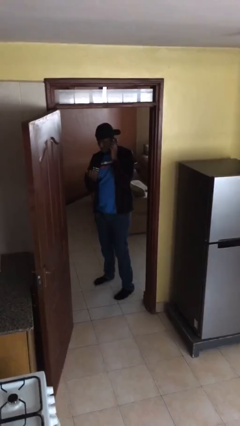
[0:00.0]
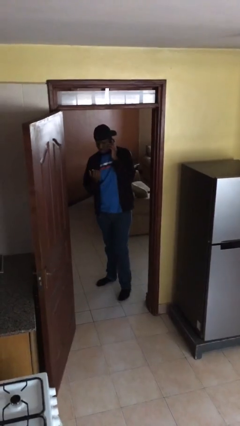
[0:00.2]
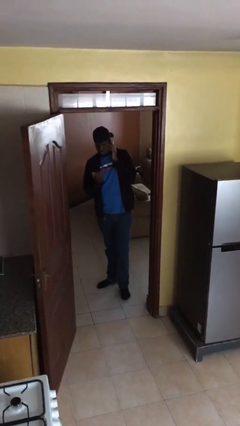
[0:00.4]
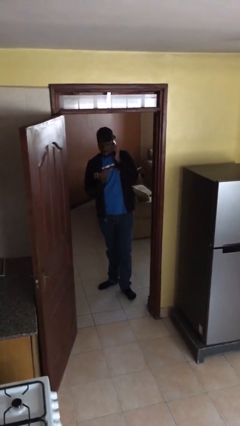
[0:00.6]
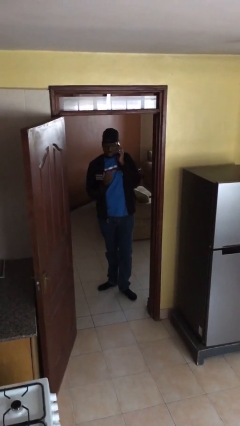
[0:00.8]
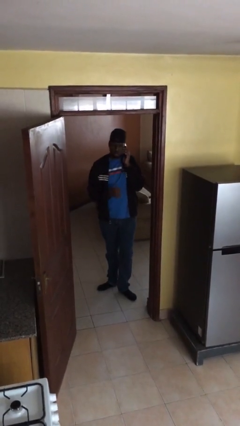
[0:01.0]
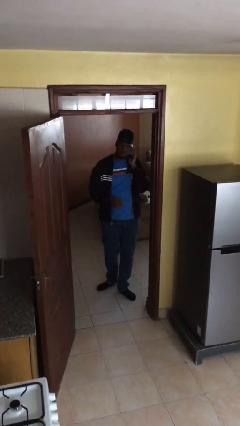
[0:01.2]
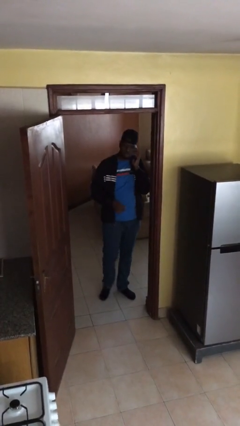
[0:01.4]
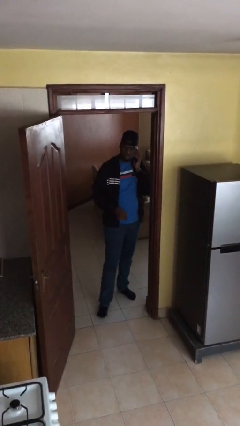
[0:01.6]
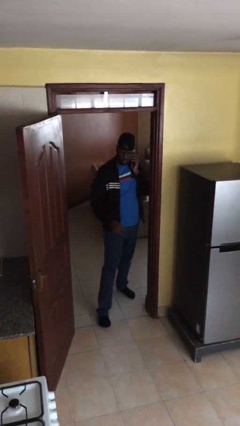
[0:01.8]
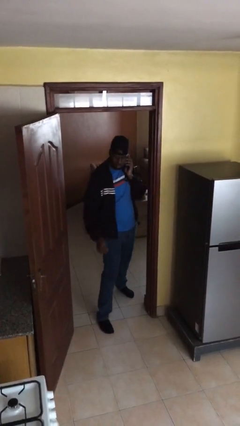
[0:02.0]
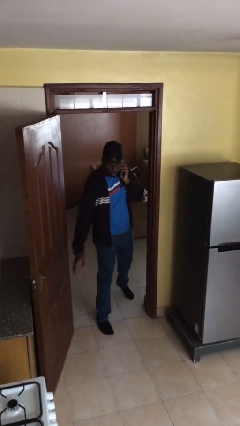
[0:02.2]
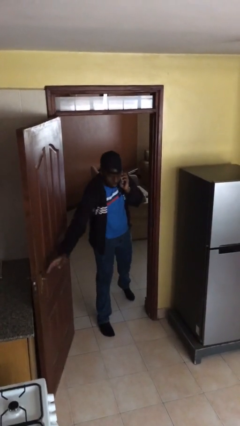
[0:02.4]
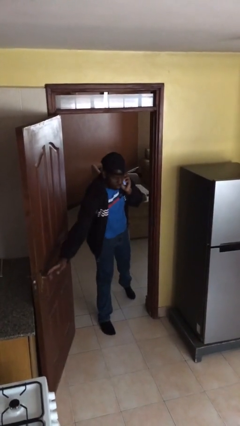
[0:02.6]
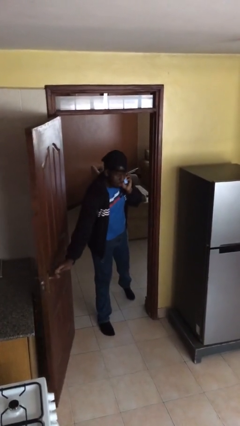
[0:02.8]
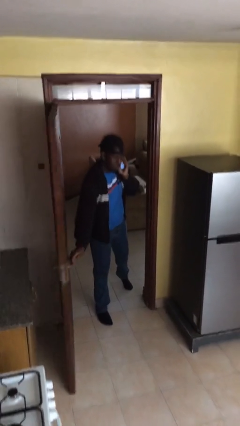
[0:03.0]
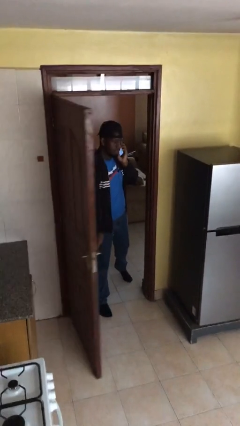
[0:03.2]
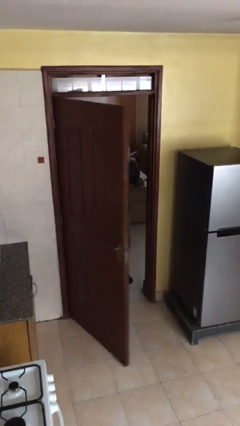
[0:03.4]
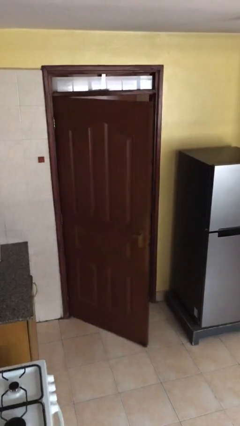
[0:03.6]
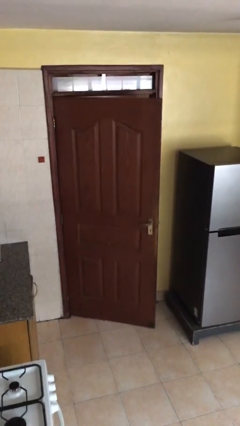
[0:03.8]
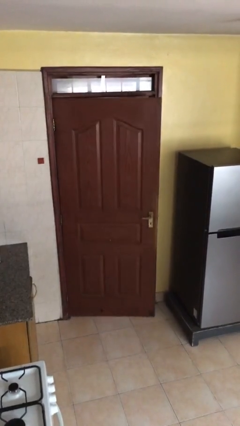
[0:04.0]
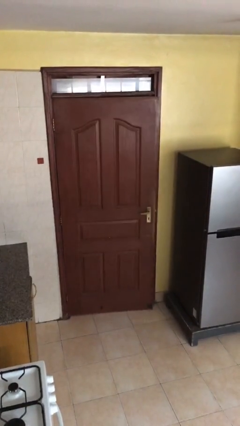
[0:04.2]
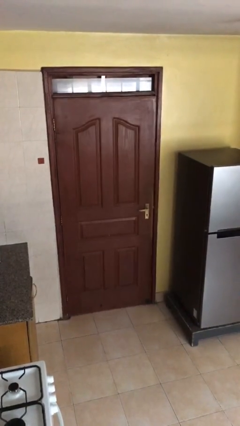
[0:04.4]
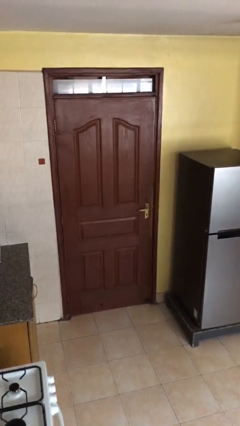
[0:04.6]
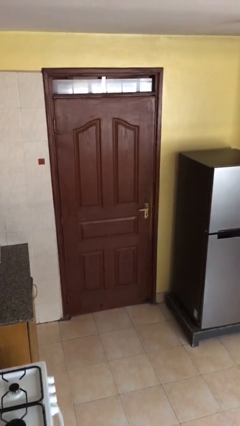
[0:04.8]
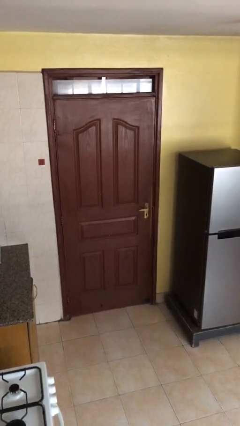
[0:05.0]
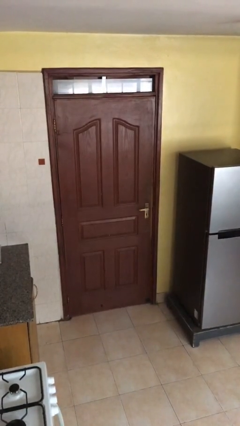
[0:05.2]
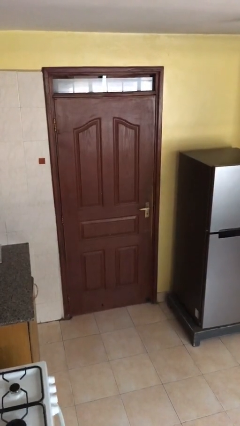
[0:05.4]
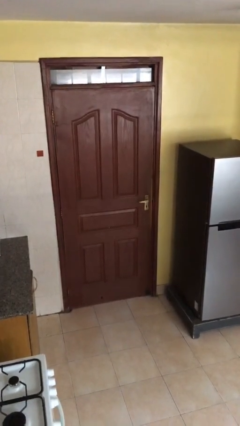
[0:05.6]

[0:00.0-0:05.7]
person closes facility door

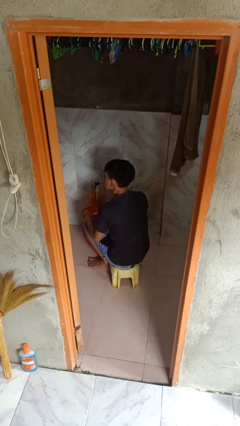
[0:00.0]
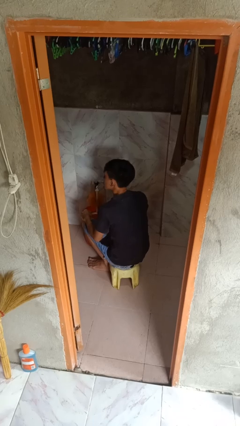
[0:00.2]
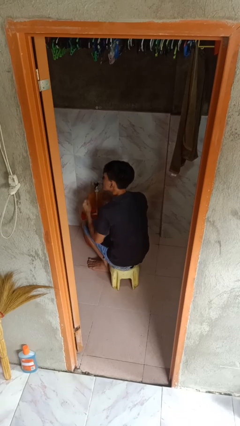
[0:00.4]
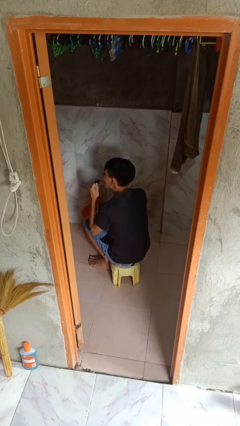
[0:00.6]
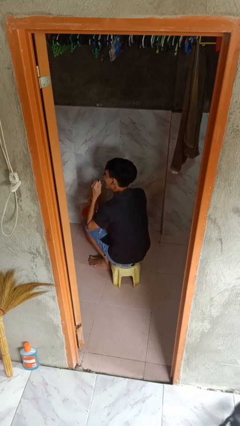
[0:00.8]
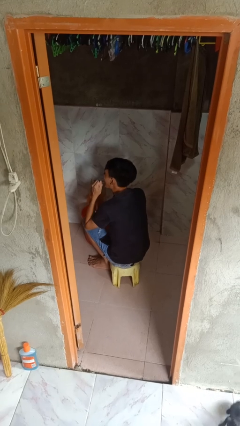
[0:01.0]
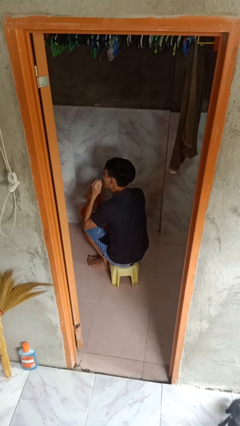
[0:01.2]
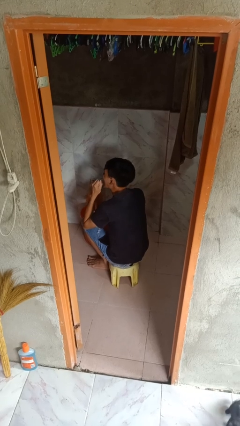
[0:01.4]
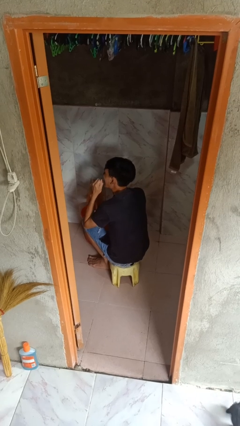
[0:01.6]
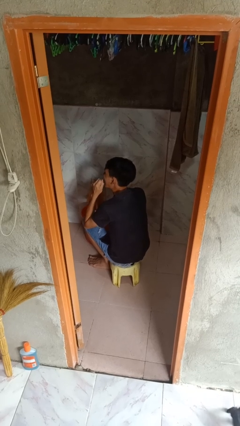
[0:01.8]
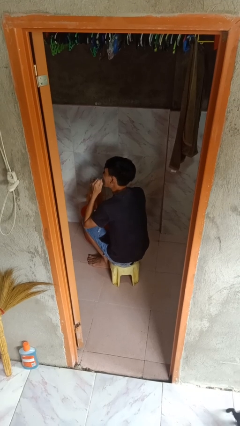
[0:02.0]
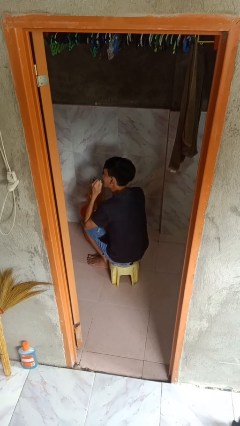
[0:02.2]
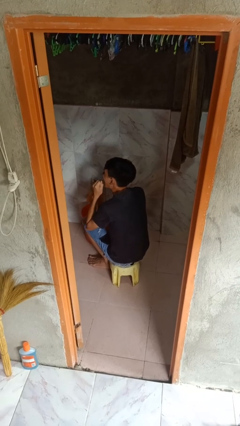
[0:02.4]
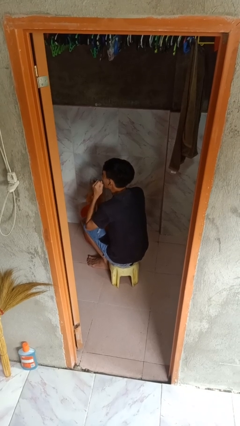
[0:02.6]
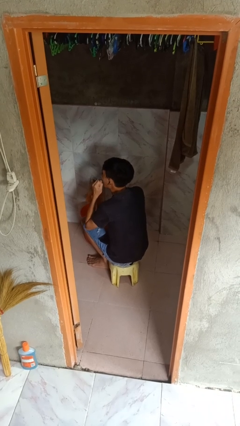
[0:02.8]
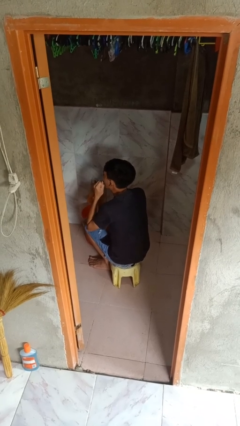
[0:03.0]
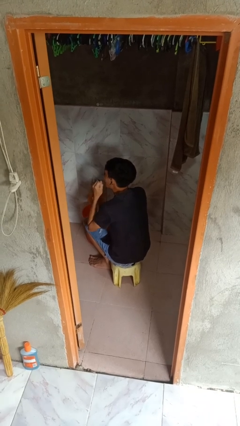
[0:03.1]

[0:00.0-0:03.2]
person flosses

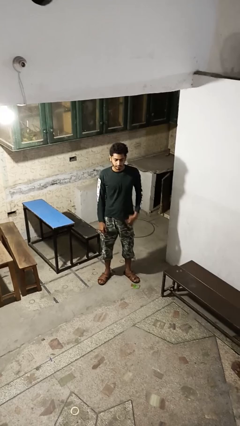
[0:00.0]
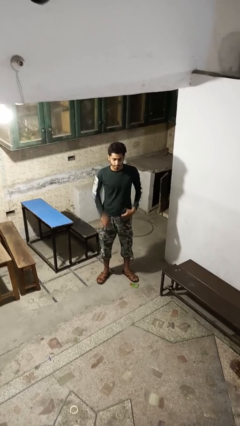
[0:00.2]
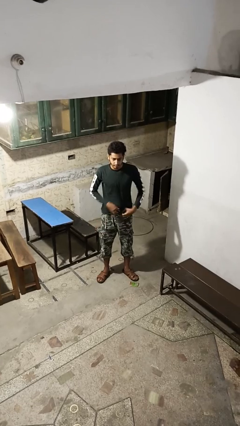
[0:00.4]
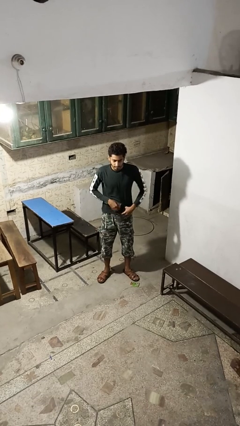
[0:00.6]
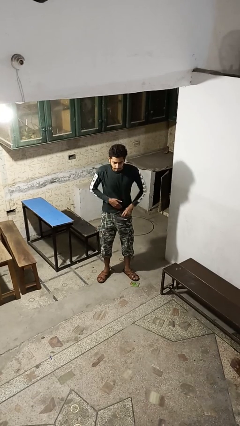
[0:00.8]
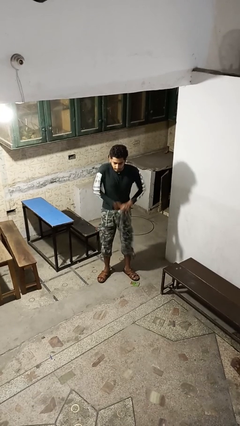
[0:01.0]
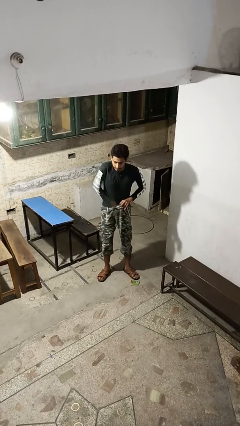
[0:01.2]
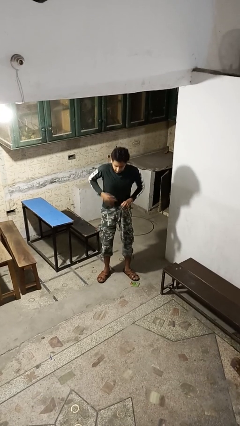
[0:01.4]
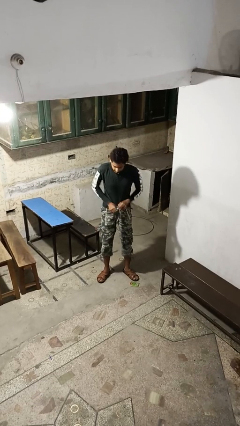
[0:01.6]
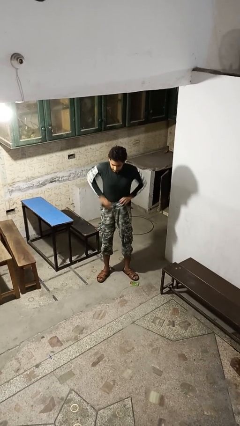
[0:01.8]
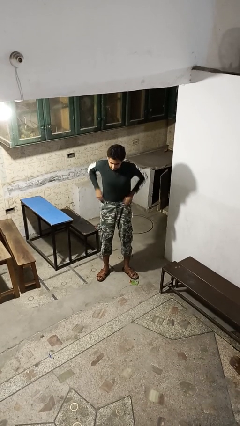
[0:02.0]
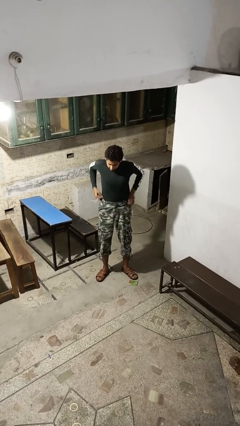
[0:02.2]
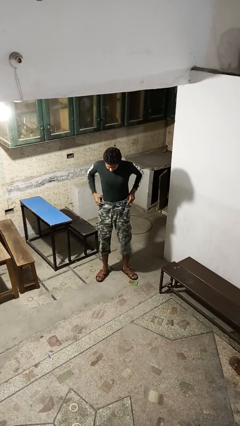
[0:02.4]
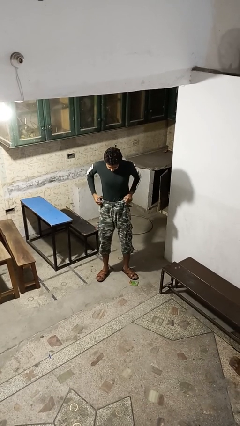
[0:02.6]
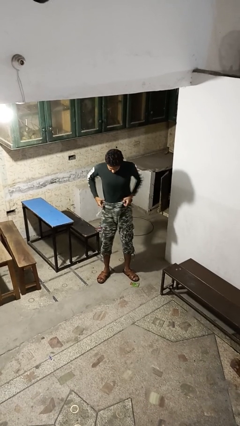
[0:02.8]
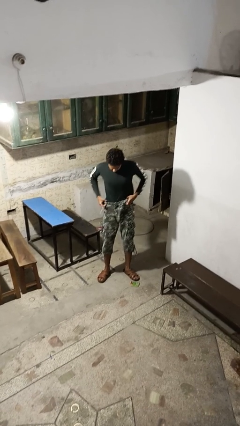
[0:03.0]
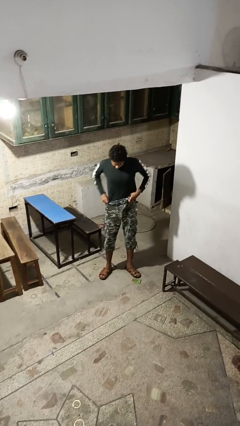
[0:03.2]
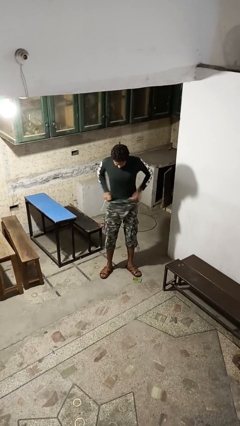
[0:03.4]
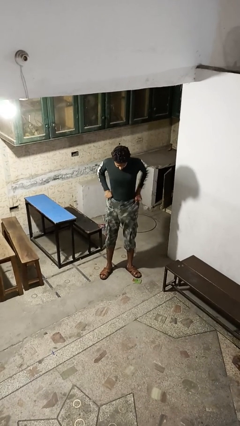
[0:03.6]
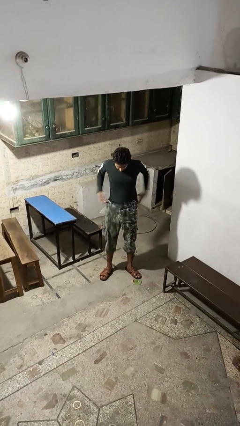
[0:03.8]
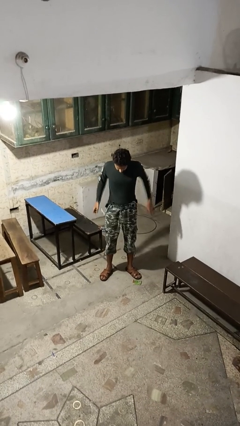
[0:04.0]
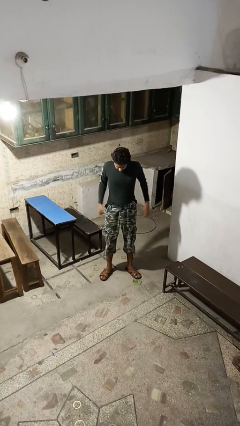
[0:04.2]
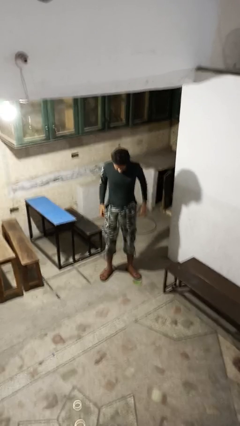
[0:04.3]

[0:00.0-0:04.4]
person tucks in shirt

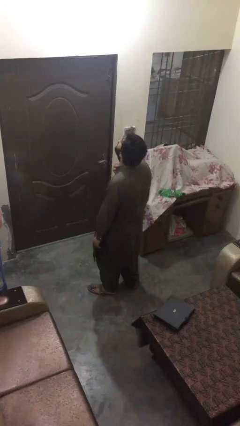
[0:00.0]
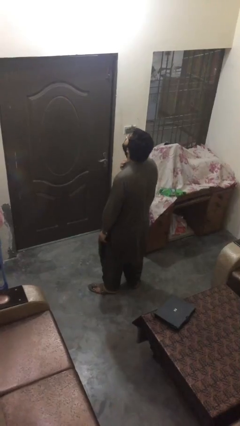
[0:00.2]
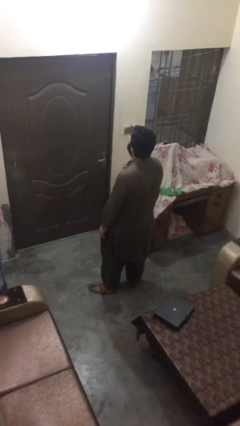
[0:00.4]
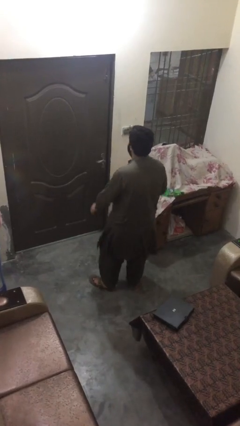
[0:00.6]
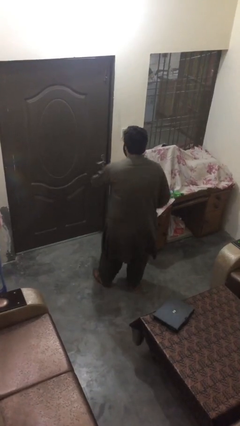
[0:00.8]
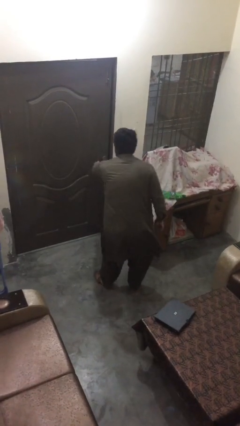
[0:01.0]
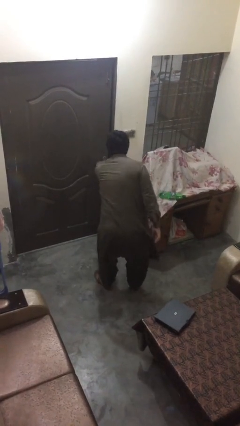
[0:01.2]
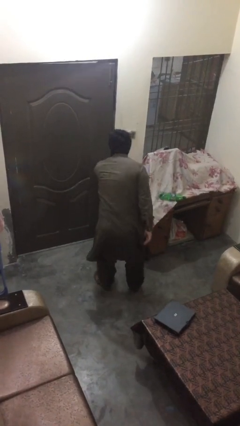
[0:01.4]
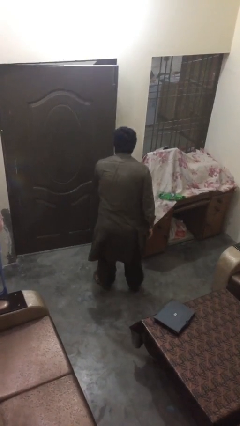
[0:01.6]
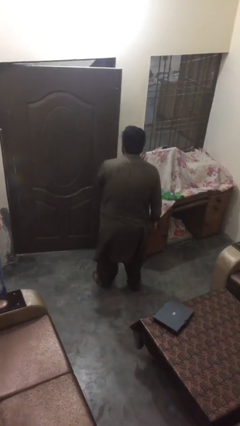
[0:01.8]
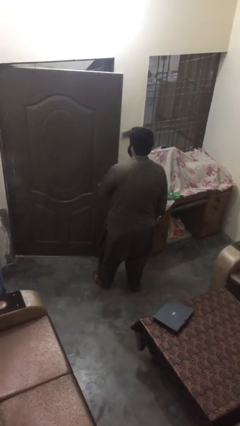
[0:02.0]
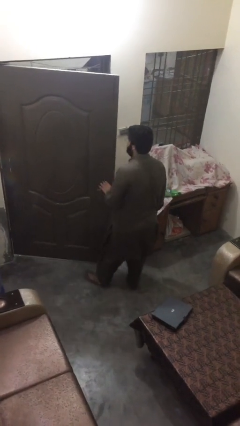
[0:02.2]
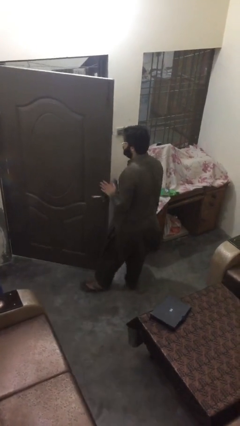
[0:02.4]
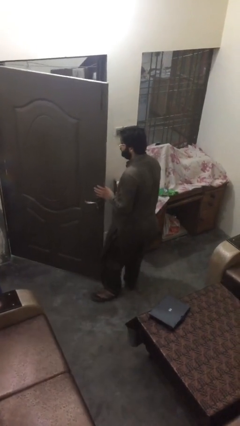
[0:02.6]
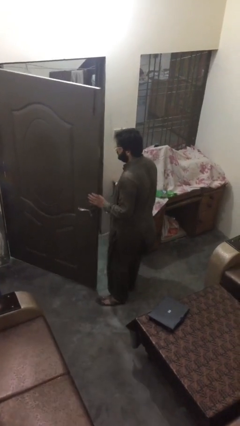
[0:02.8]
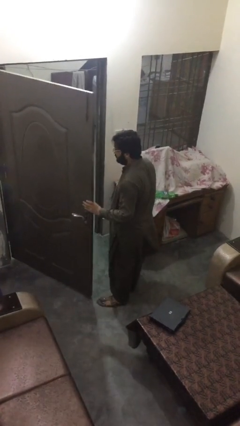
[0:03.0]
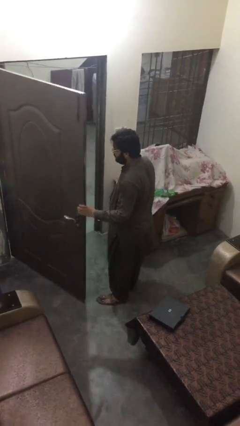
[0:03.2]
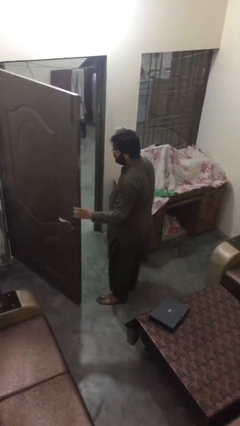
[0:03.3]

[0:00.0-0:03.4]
person opens facility door

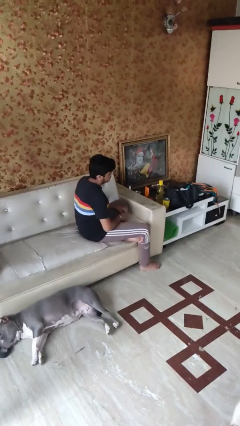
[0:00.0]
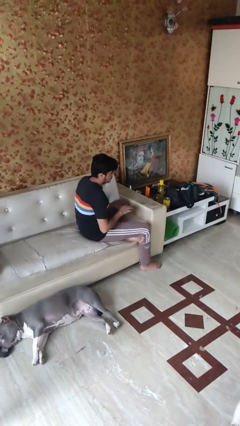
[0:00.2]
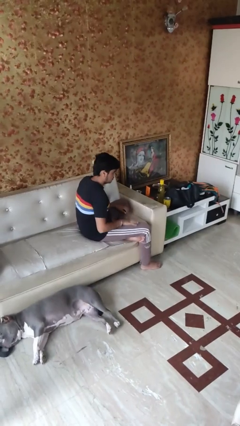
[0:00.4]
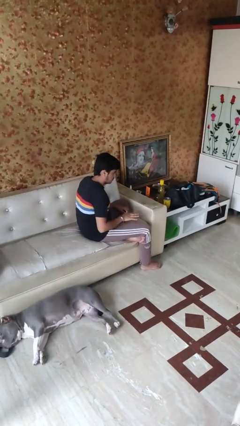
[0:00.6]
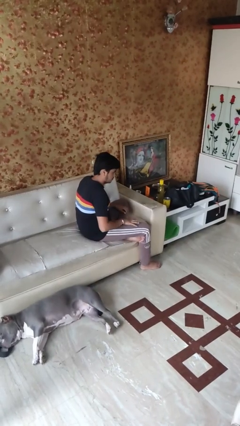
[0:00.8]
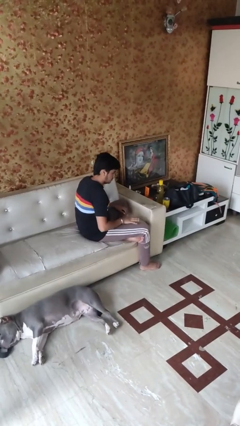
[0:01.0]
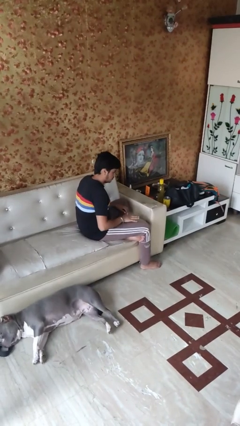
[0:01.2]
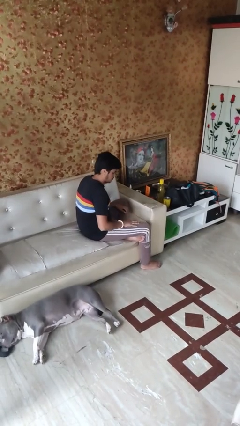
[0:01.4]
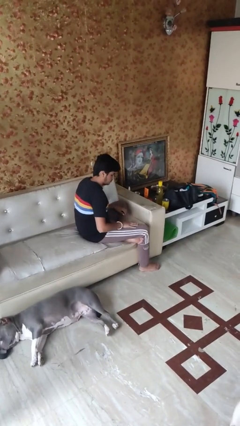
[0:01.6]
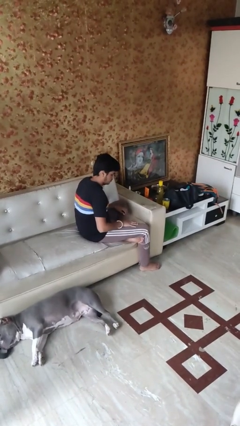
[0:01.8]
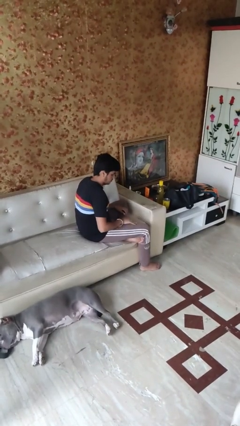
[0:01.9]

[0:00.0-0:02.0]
person slaps hands on thighs
